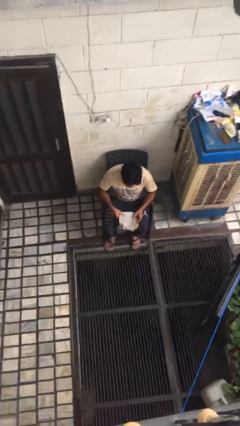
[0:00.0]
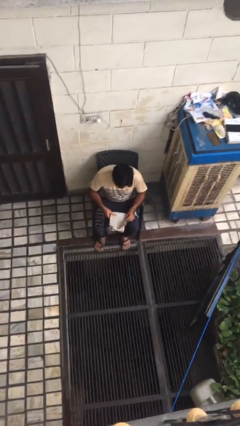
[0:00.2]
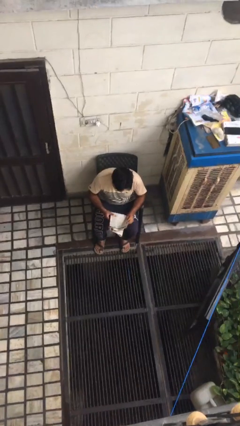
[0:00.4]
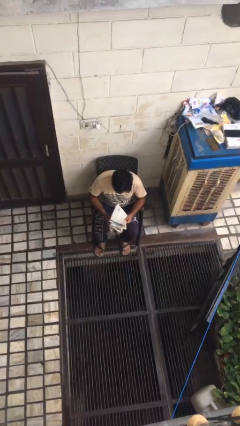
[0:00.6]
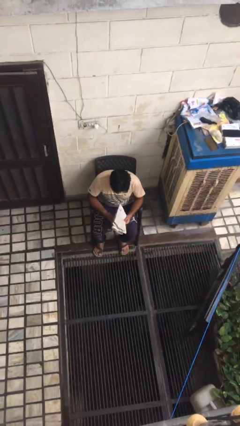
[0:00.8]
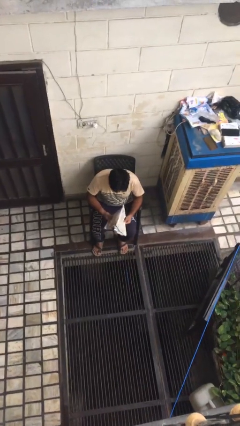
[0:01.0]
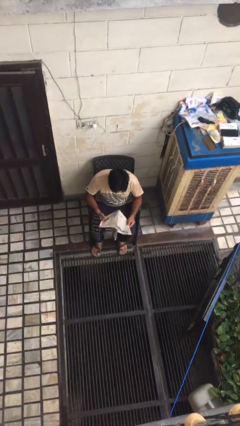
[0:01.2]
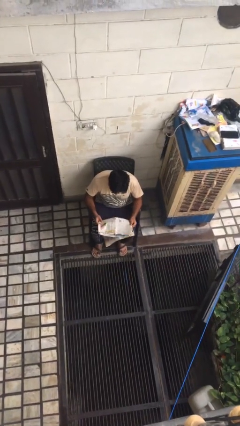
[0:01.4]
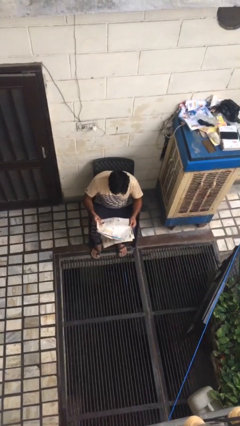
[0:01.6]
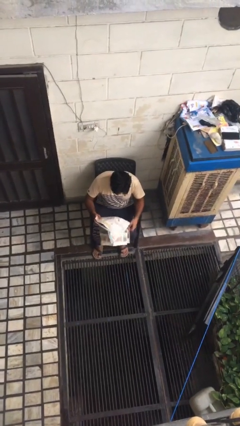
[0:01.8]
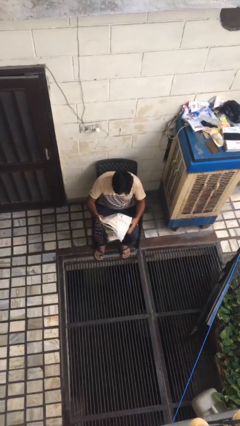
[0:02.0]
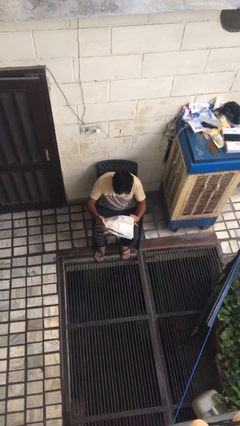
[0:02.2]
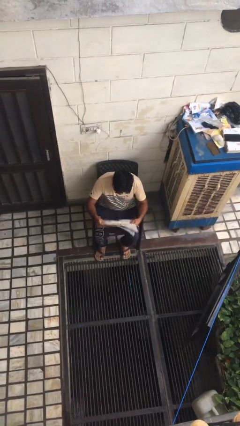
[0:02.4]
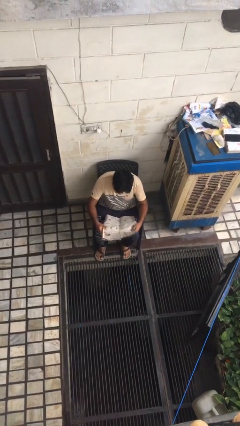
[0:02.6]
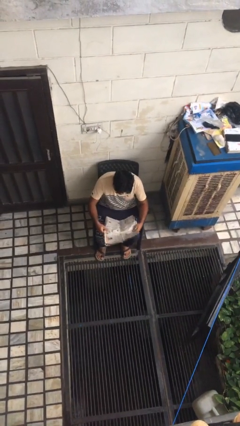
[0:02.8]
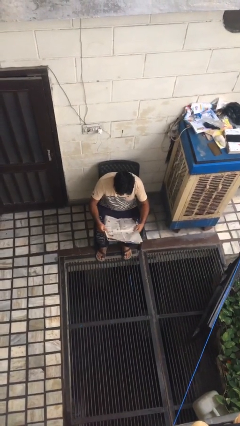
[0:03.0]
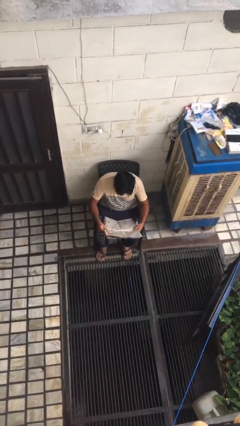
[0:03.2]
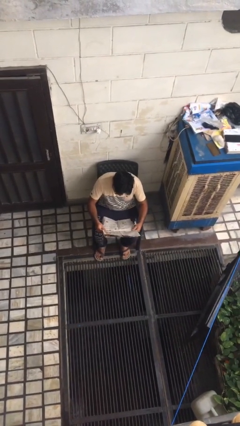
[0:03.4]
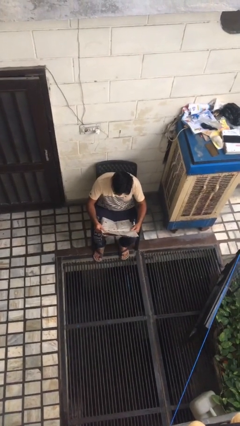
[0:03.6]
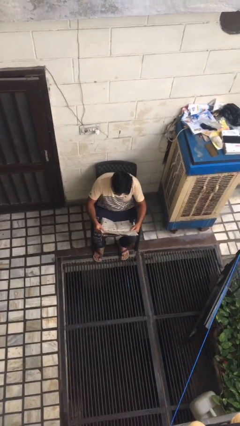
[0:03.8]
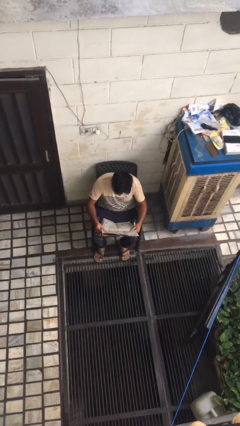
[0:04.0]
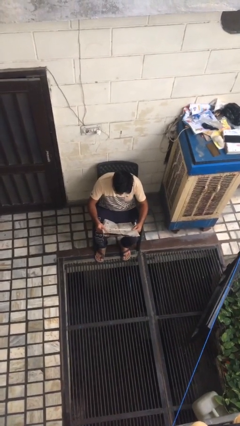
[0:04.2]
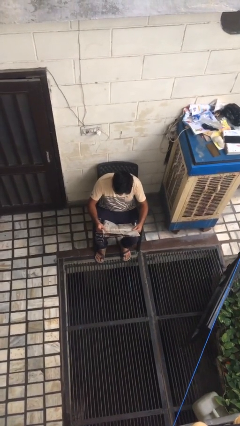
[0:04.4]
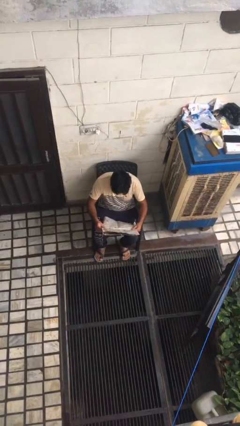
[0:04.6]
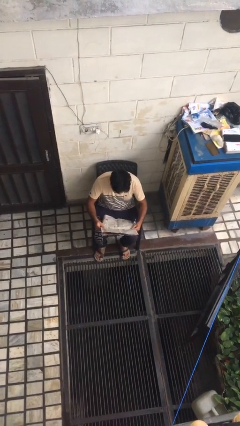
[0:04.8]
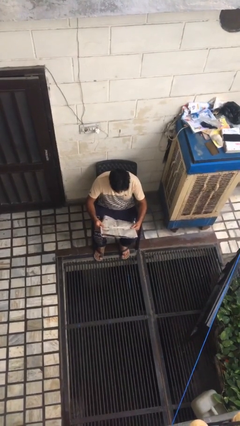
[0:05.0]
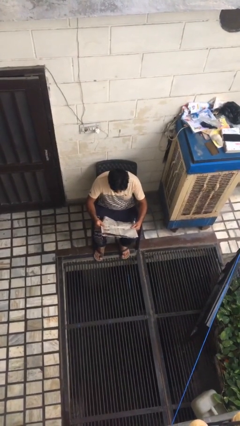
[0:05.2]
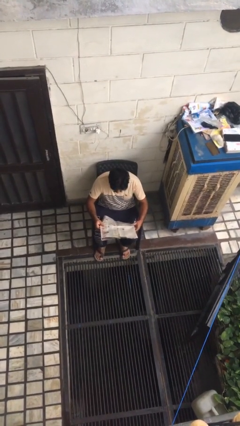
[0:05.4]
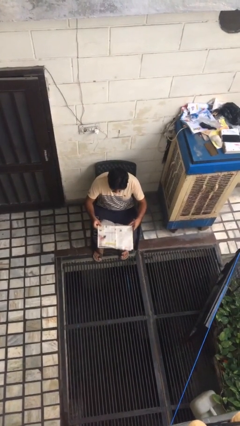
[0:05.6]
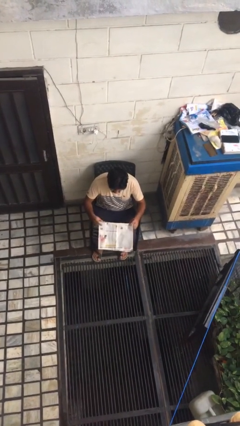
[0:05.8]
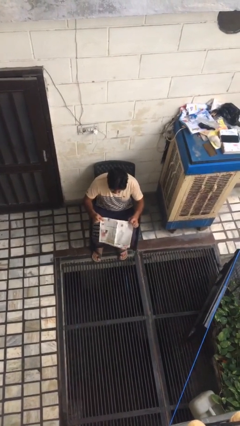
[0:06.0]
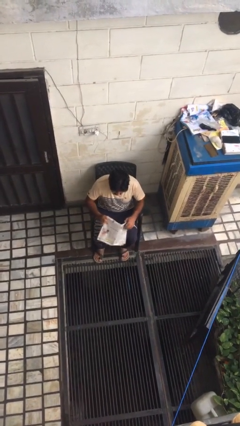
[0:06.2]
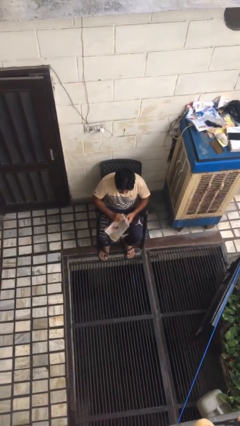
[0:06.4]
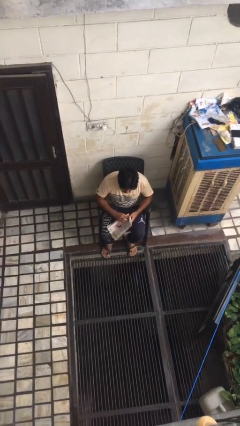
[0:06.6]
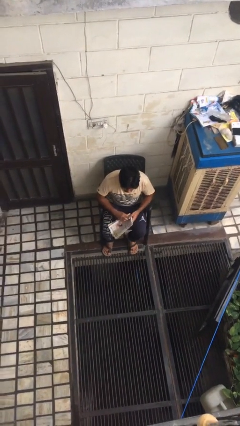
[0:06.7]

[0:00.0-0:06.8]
person reads newspaper

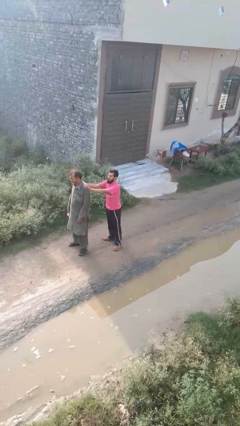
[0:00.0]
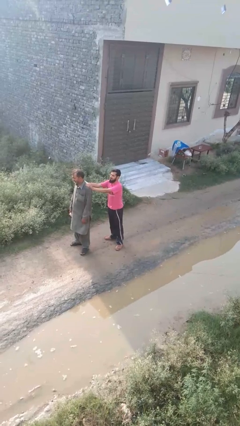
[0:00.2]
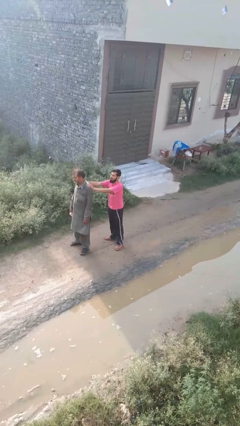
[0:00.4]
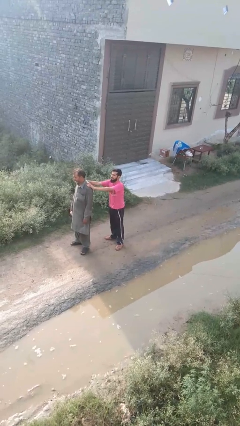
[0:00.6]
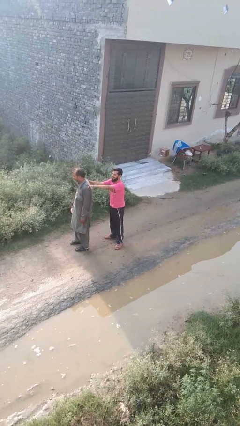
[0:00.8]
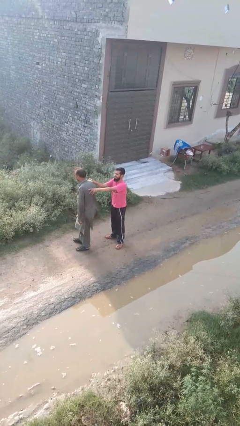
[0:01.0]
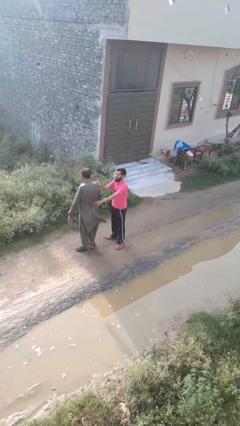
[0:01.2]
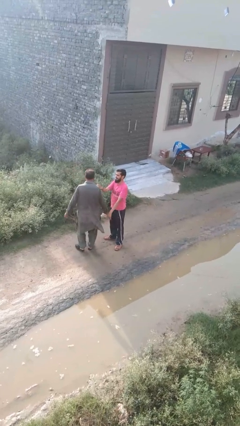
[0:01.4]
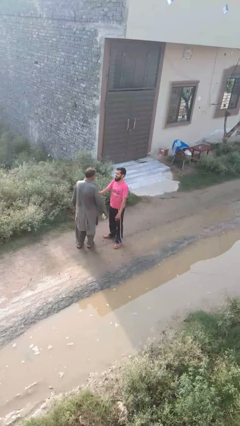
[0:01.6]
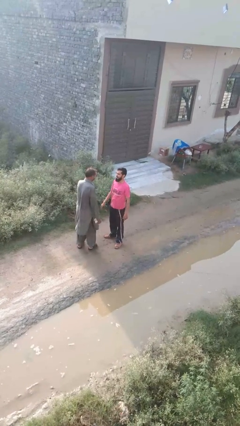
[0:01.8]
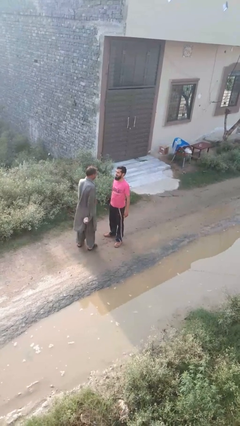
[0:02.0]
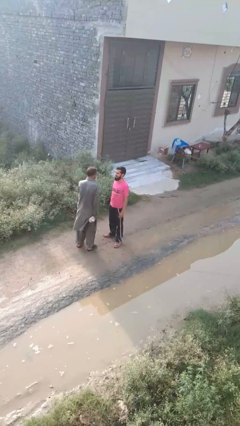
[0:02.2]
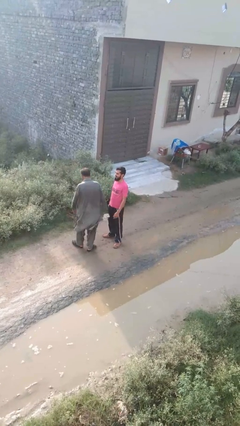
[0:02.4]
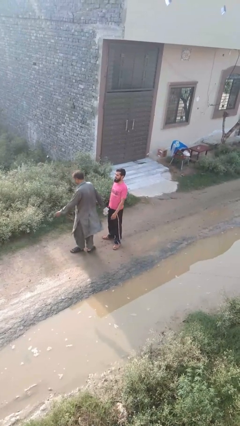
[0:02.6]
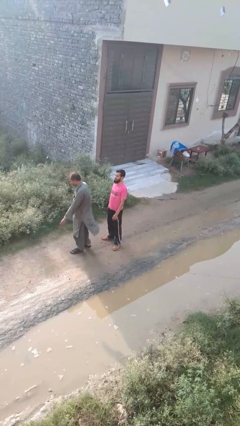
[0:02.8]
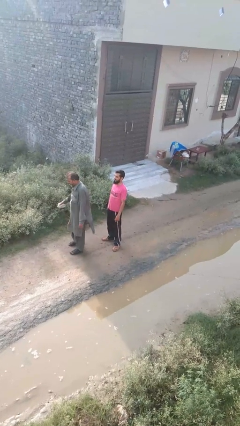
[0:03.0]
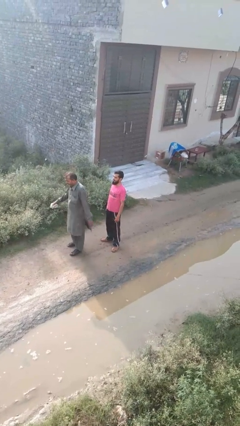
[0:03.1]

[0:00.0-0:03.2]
person spins person around

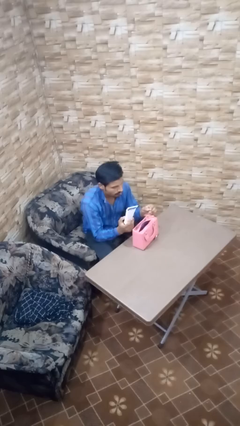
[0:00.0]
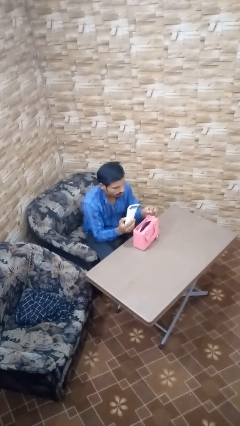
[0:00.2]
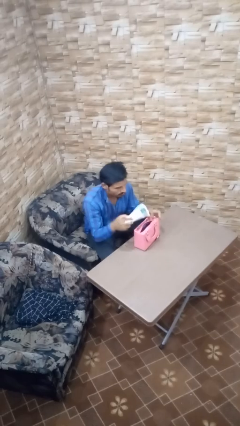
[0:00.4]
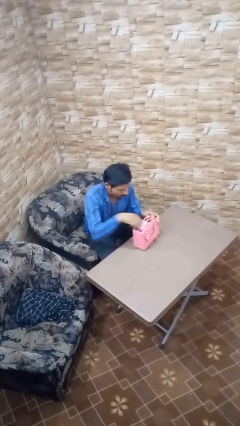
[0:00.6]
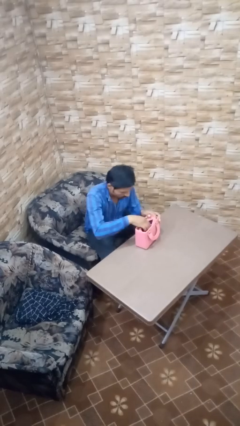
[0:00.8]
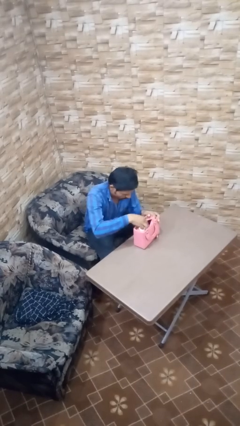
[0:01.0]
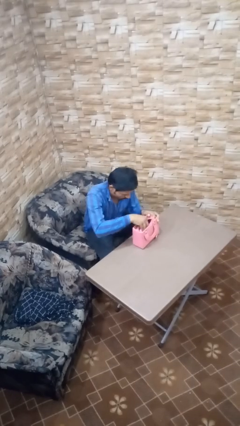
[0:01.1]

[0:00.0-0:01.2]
person puts object into purse

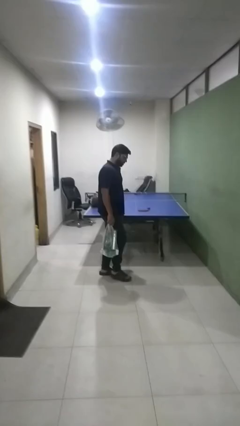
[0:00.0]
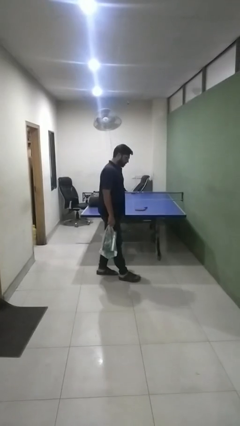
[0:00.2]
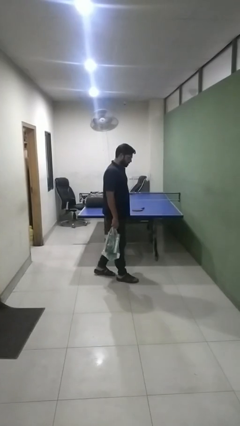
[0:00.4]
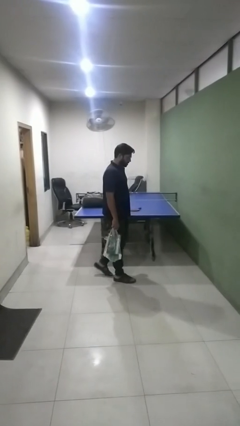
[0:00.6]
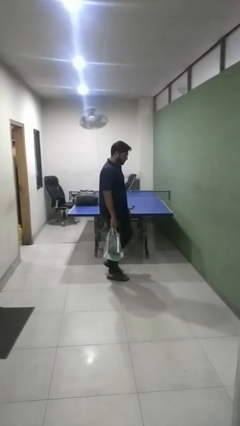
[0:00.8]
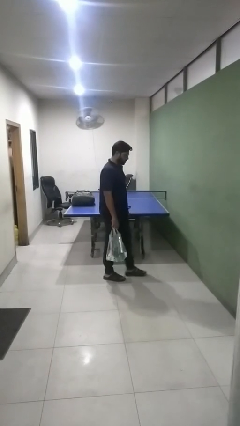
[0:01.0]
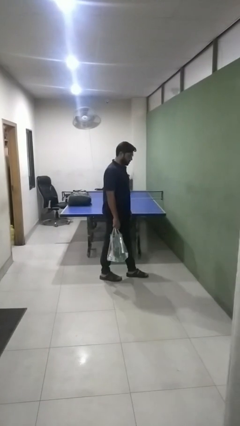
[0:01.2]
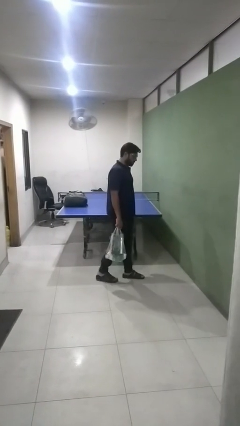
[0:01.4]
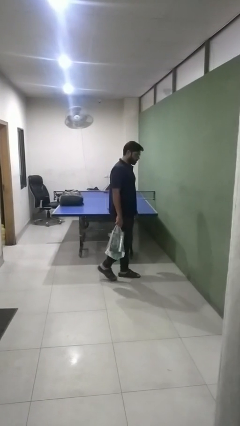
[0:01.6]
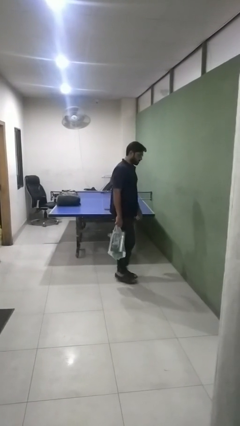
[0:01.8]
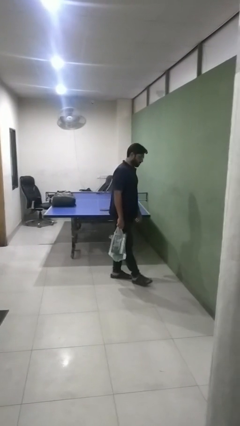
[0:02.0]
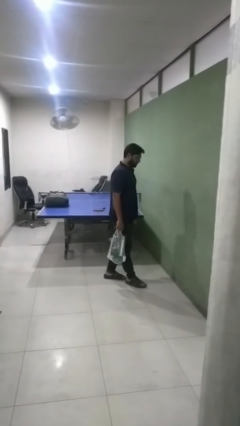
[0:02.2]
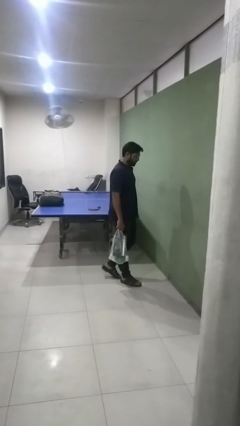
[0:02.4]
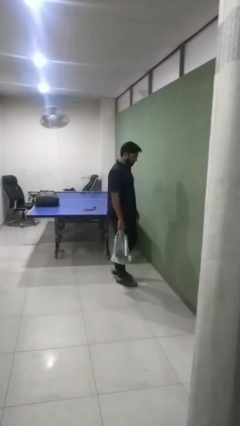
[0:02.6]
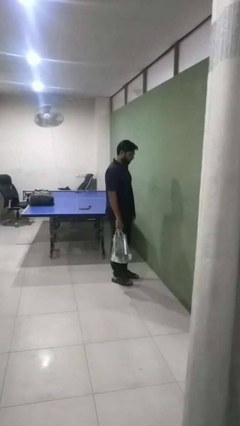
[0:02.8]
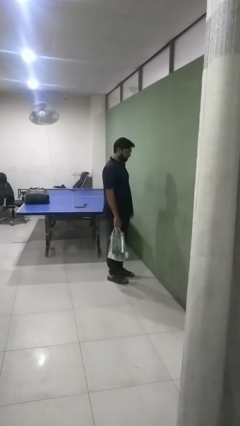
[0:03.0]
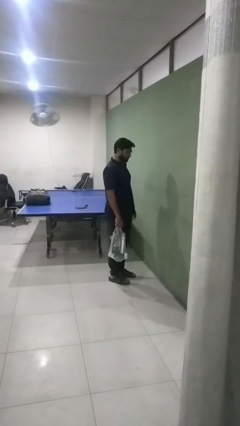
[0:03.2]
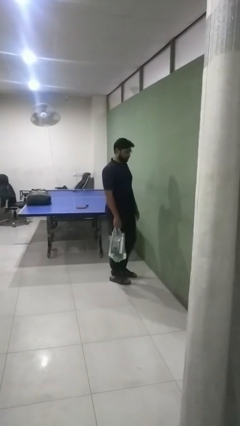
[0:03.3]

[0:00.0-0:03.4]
person carries groceries

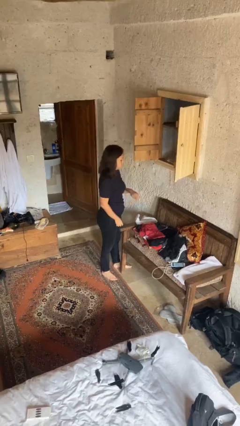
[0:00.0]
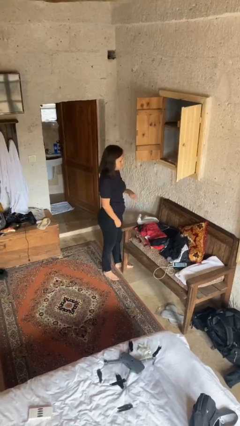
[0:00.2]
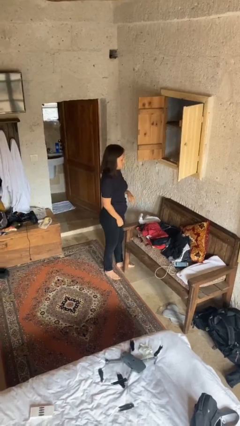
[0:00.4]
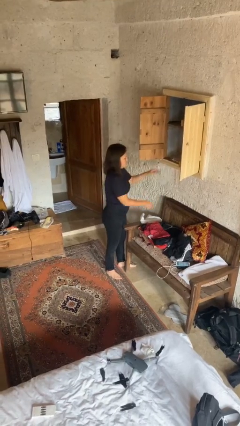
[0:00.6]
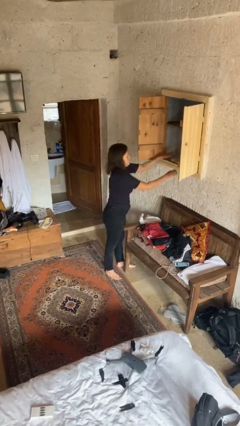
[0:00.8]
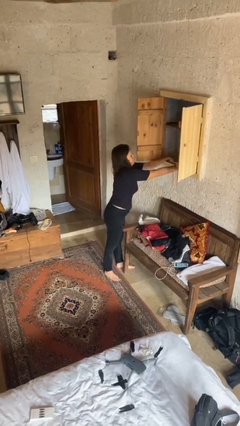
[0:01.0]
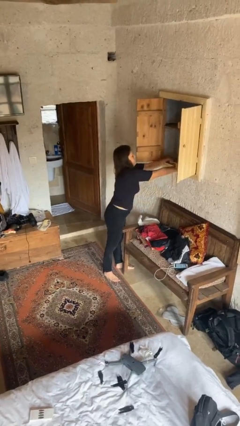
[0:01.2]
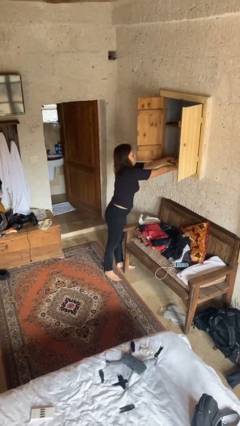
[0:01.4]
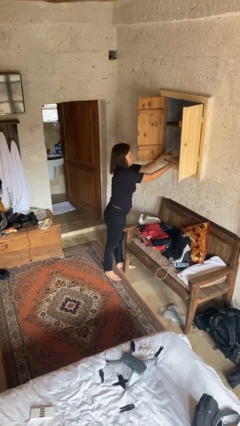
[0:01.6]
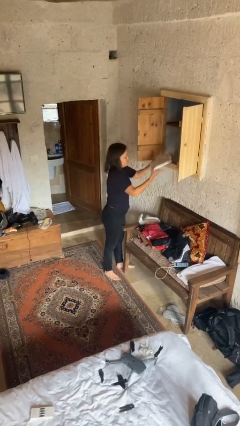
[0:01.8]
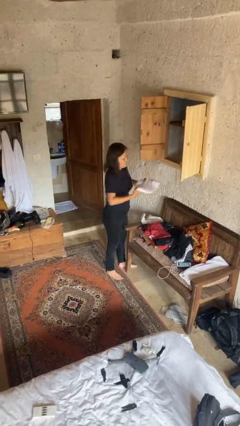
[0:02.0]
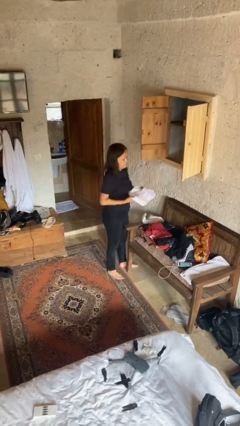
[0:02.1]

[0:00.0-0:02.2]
person takes clothes from dresser

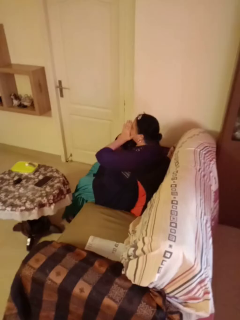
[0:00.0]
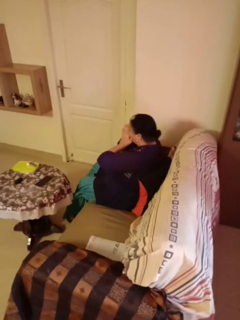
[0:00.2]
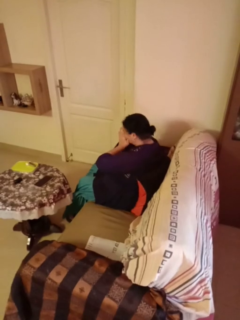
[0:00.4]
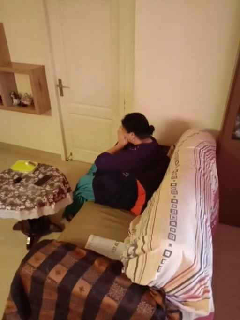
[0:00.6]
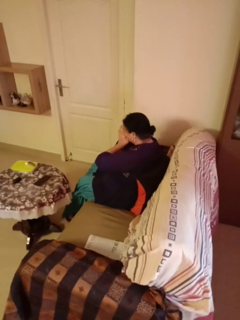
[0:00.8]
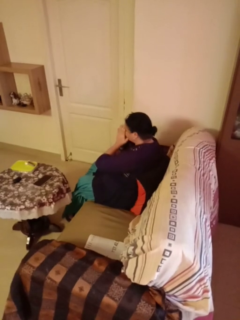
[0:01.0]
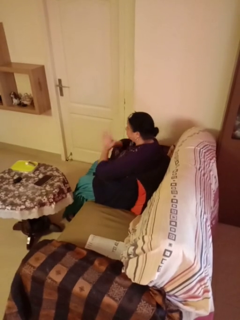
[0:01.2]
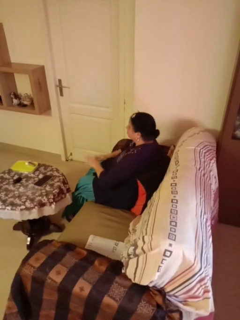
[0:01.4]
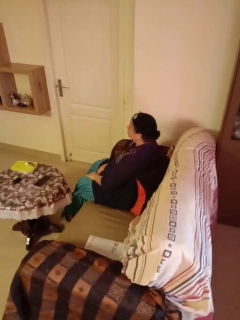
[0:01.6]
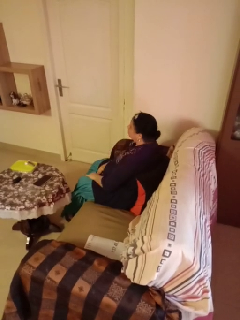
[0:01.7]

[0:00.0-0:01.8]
person sneezes into hand
